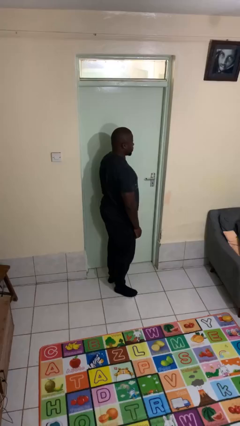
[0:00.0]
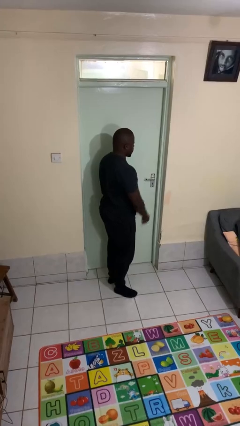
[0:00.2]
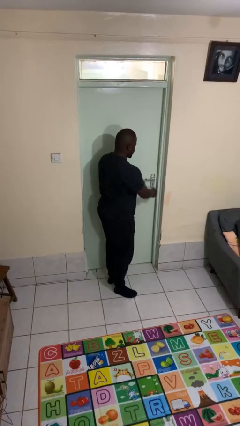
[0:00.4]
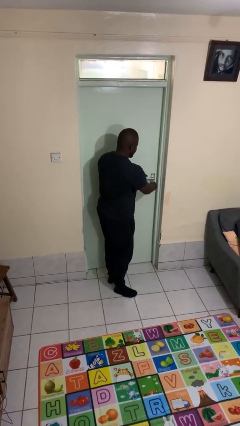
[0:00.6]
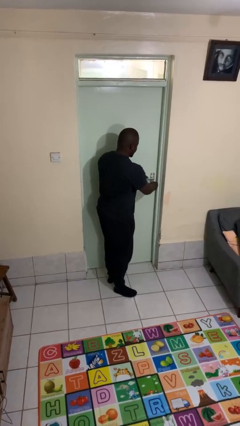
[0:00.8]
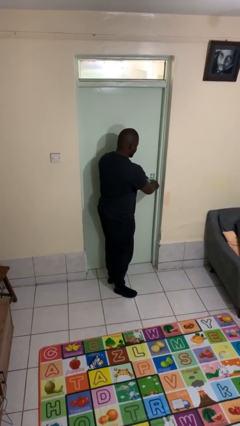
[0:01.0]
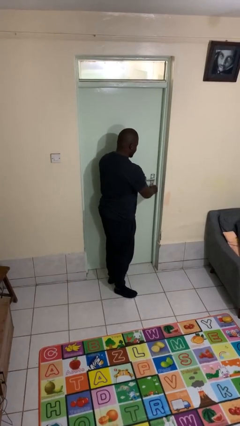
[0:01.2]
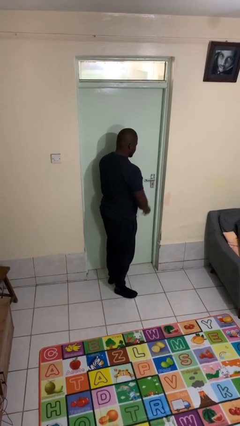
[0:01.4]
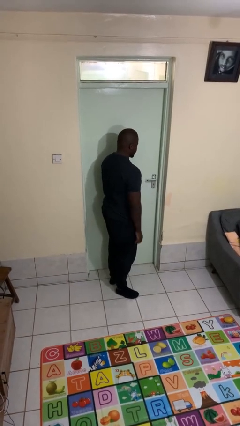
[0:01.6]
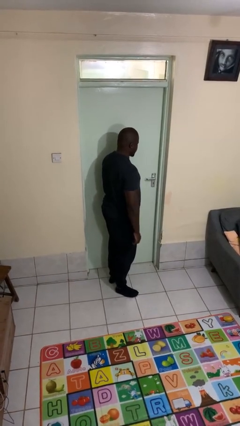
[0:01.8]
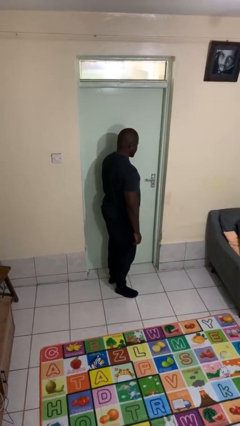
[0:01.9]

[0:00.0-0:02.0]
person unlocks door with keys

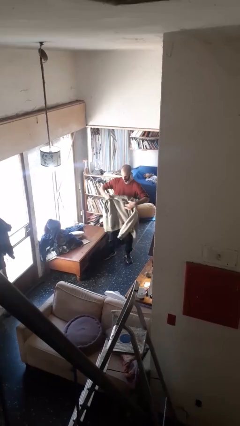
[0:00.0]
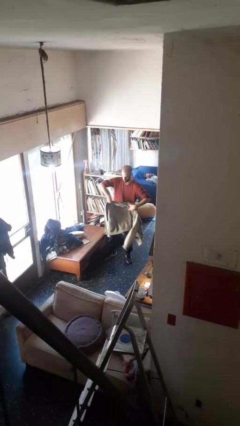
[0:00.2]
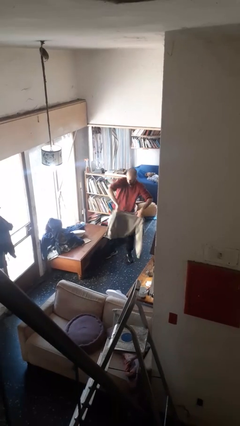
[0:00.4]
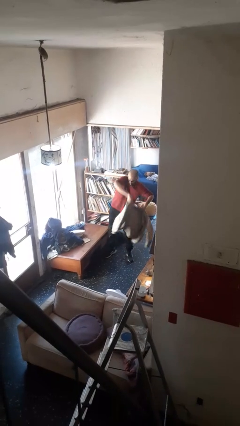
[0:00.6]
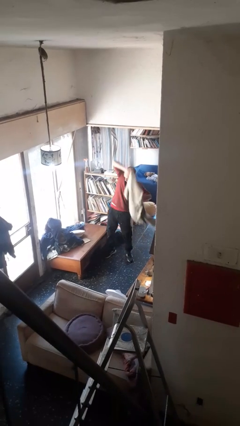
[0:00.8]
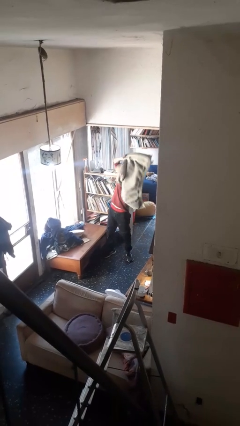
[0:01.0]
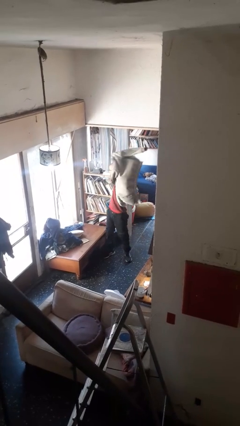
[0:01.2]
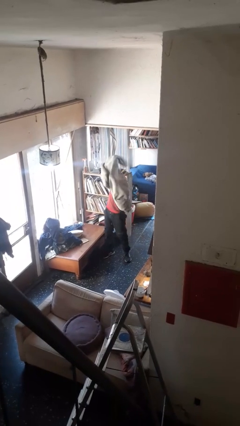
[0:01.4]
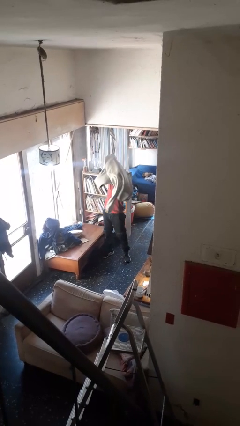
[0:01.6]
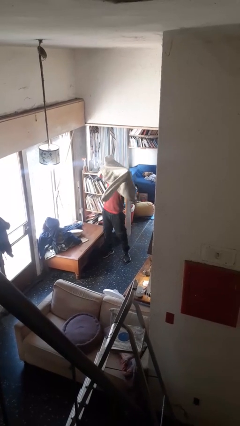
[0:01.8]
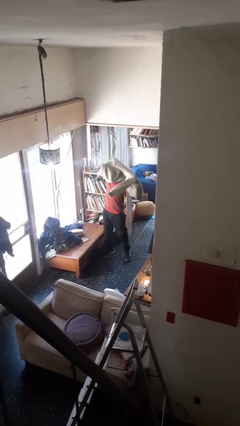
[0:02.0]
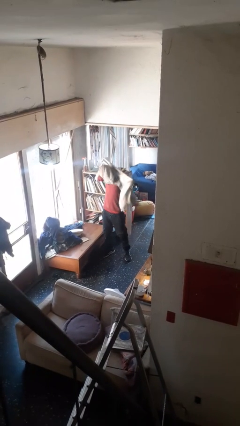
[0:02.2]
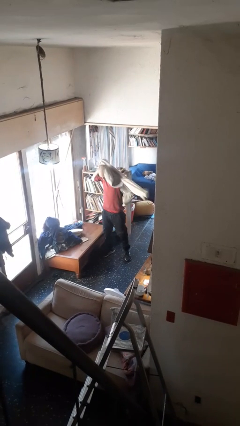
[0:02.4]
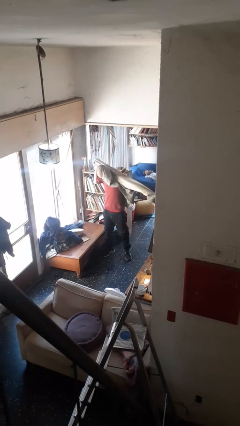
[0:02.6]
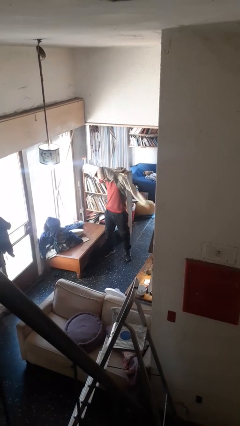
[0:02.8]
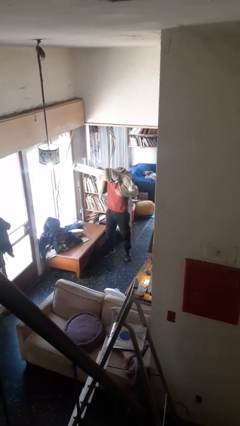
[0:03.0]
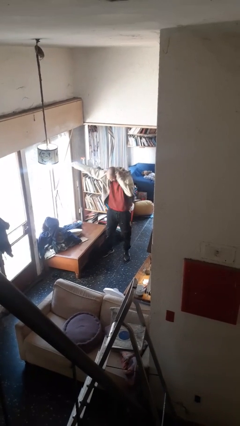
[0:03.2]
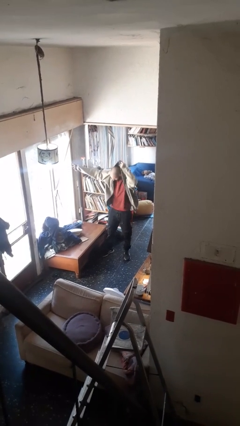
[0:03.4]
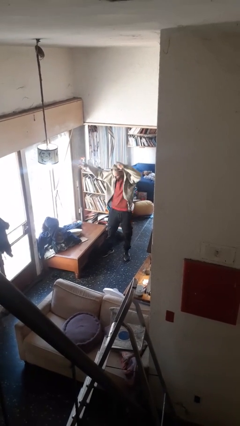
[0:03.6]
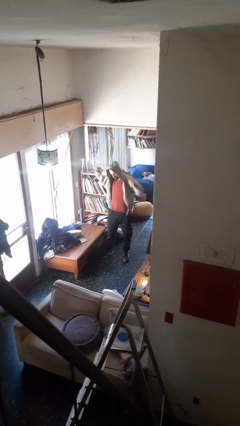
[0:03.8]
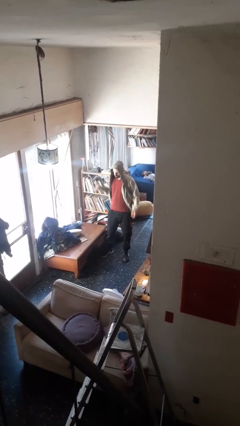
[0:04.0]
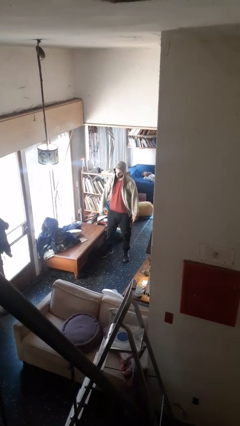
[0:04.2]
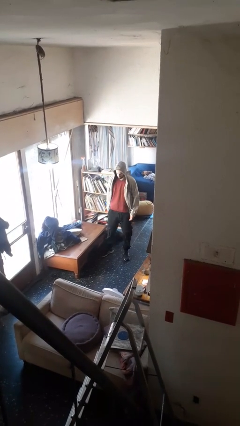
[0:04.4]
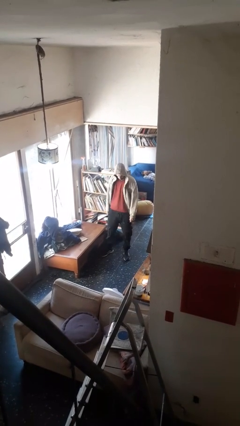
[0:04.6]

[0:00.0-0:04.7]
person puts on hoodie

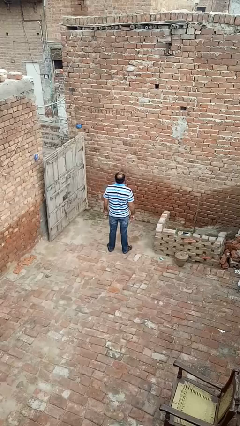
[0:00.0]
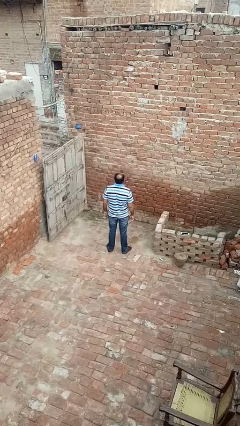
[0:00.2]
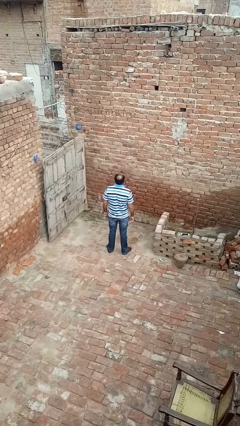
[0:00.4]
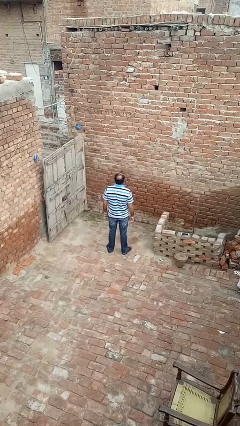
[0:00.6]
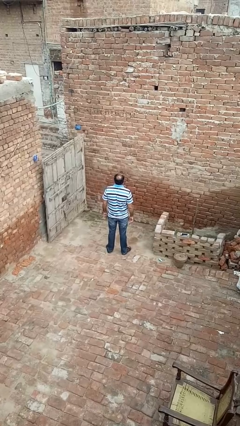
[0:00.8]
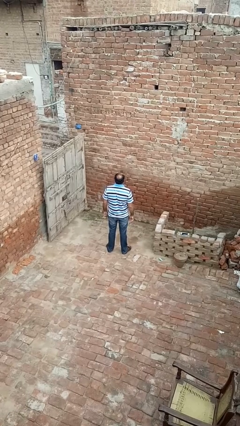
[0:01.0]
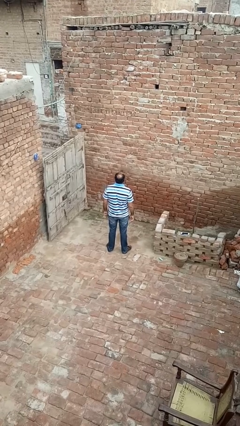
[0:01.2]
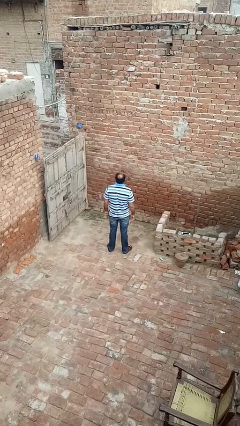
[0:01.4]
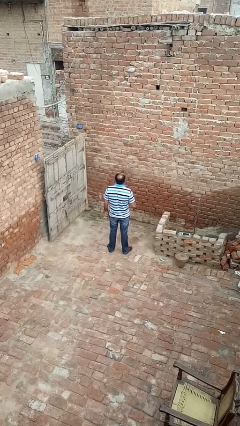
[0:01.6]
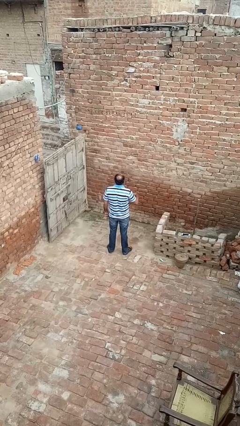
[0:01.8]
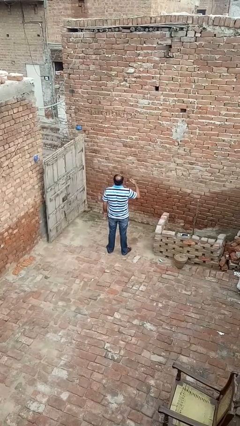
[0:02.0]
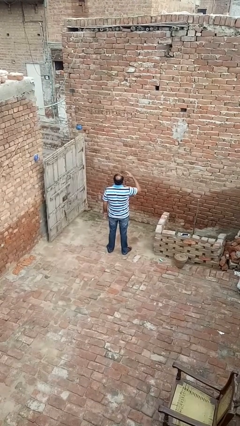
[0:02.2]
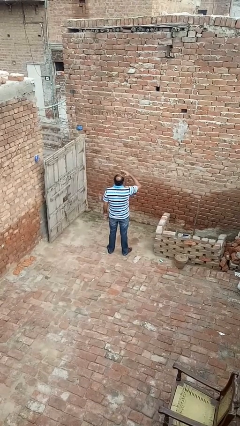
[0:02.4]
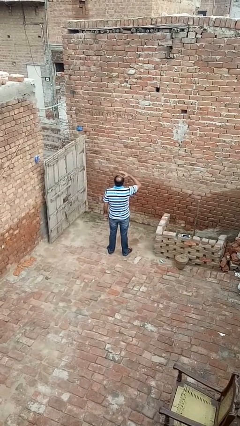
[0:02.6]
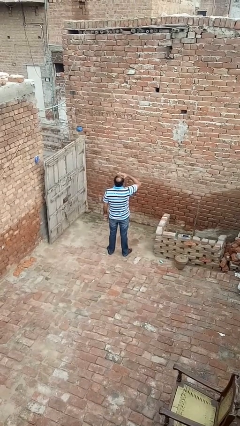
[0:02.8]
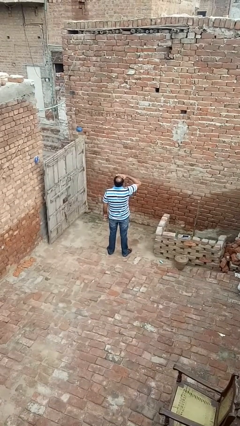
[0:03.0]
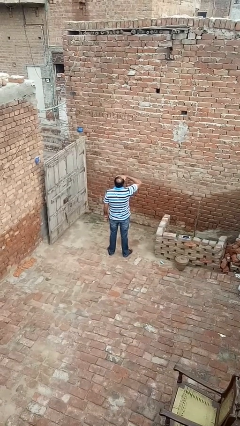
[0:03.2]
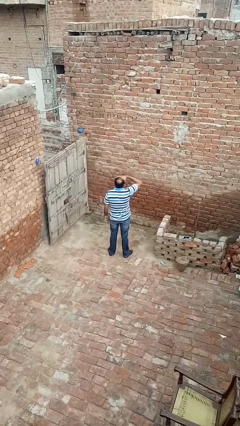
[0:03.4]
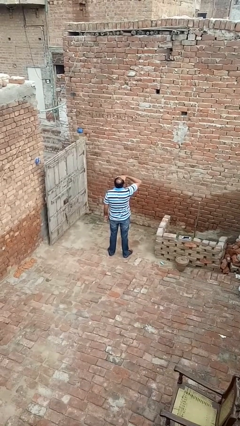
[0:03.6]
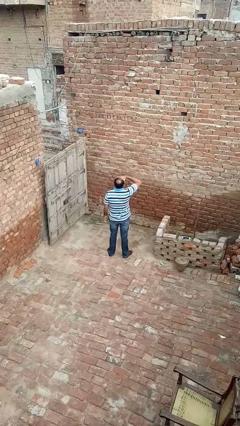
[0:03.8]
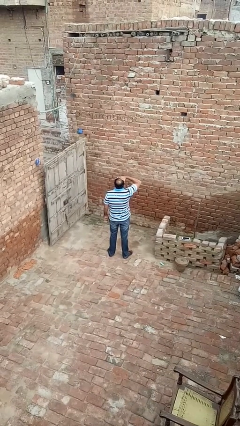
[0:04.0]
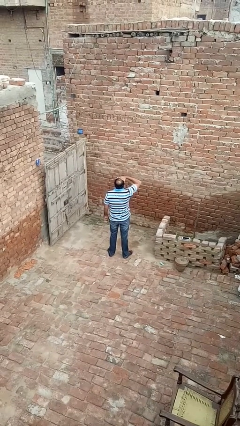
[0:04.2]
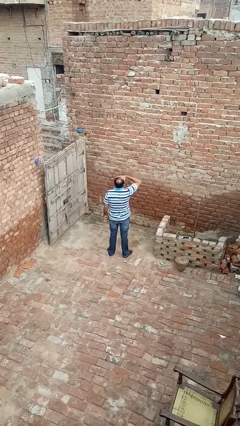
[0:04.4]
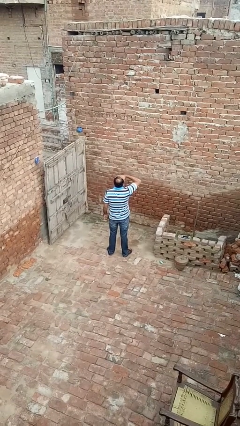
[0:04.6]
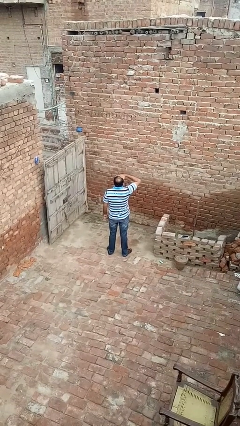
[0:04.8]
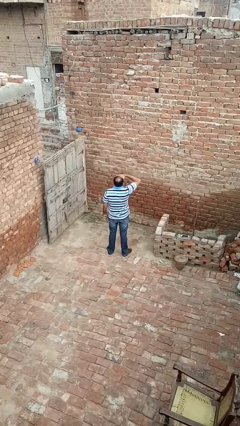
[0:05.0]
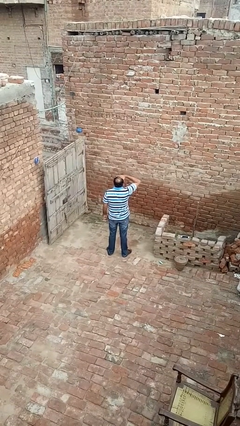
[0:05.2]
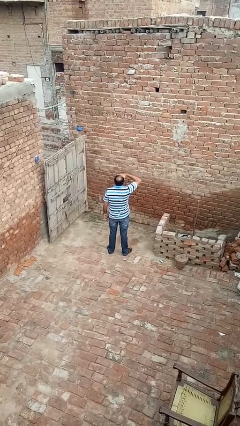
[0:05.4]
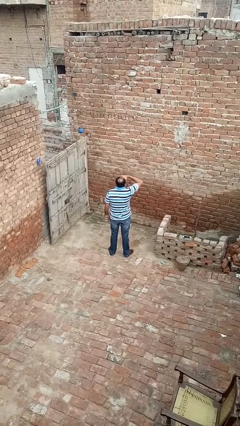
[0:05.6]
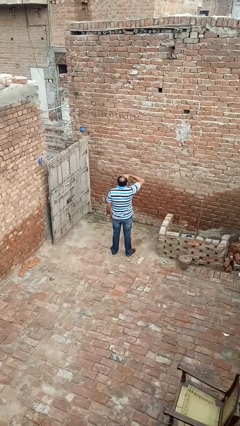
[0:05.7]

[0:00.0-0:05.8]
person shades eyes

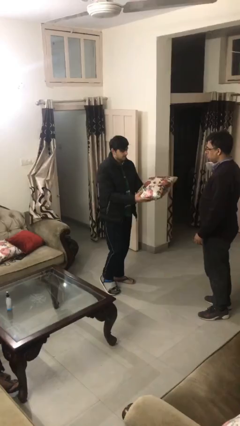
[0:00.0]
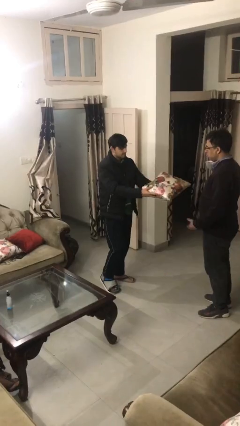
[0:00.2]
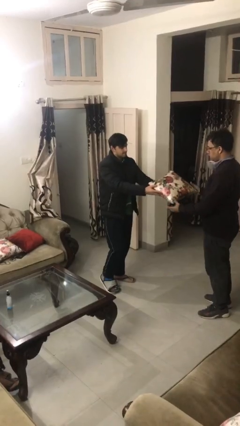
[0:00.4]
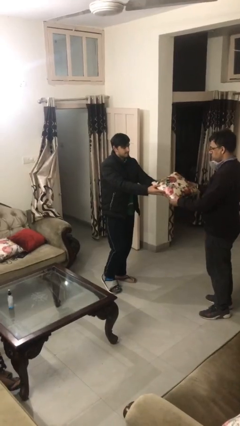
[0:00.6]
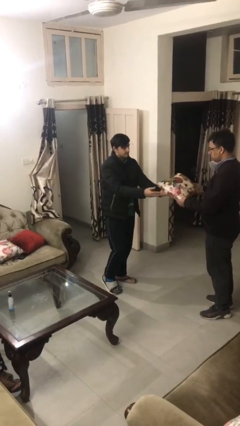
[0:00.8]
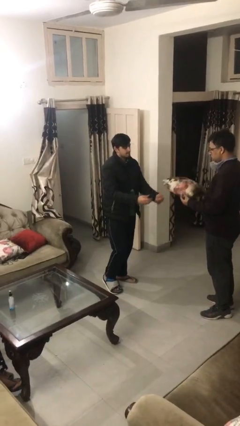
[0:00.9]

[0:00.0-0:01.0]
person transfers object to person

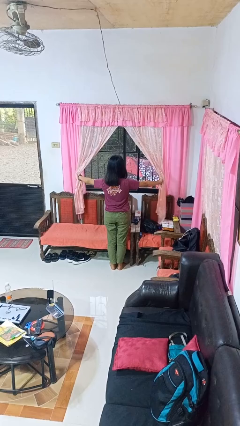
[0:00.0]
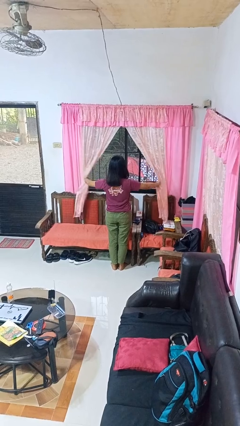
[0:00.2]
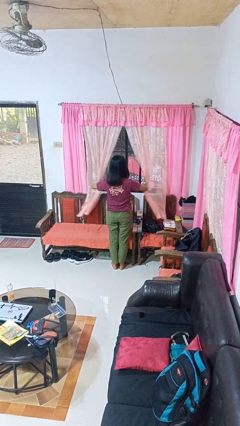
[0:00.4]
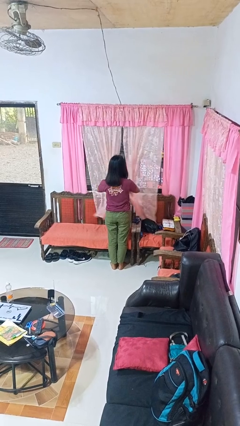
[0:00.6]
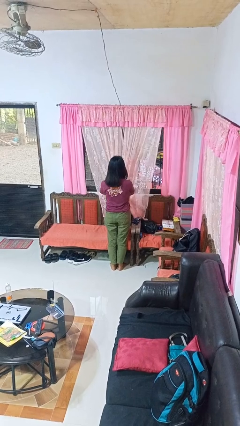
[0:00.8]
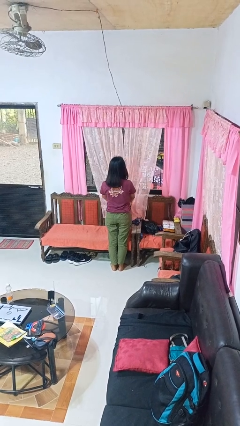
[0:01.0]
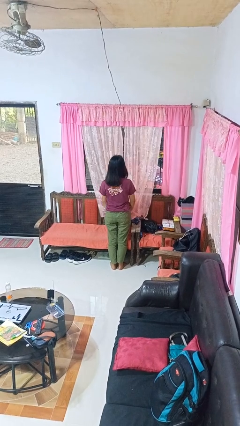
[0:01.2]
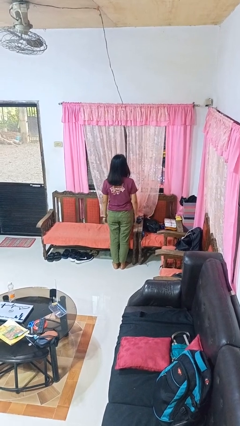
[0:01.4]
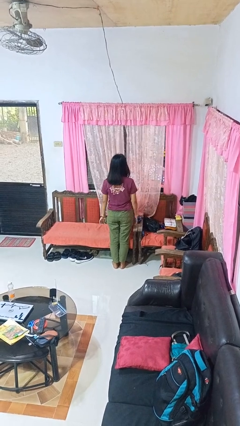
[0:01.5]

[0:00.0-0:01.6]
person closes curtains

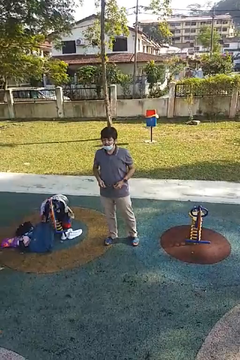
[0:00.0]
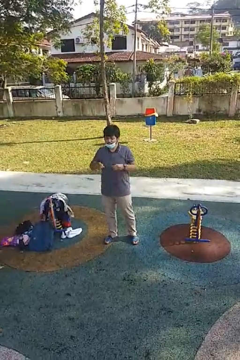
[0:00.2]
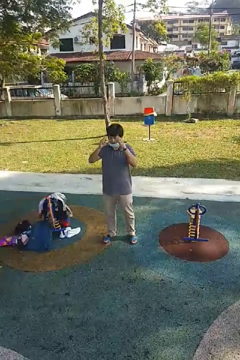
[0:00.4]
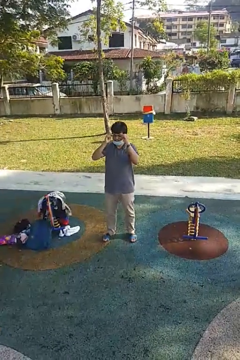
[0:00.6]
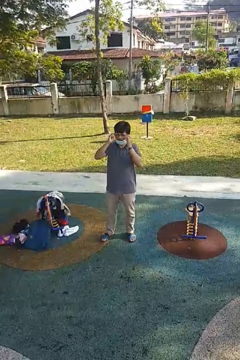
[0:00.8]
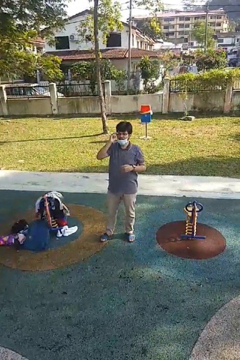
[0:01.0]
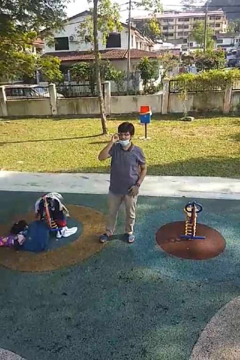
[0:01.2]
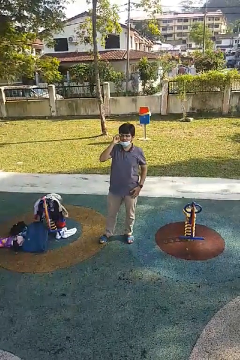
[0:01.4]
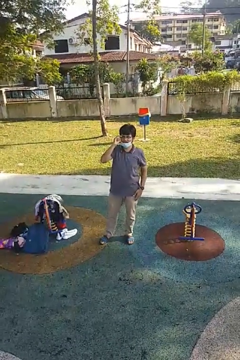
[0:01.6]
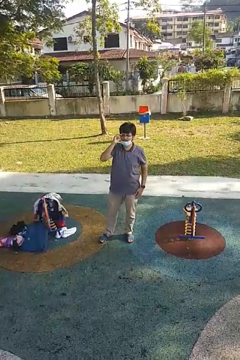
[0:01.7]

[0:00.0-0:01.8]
person puts on glasses

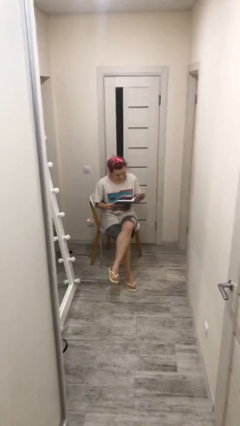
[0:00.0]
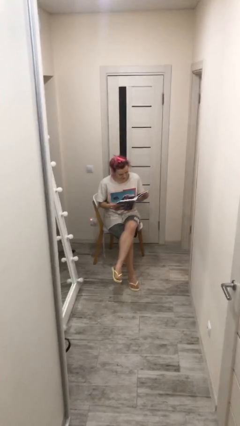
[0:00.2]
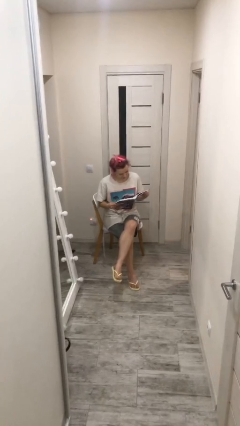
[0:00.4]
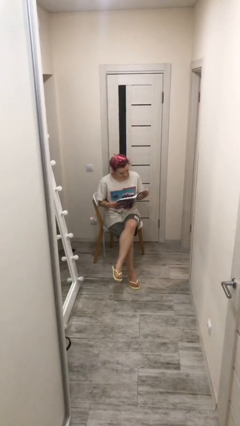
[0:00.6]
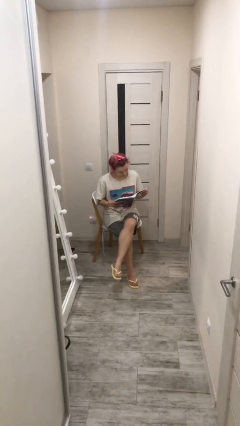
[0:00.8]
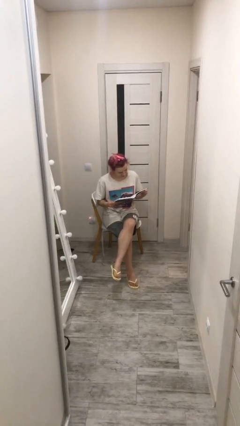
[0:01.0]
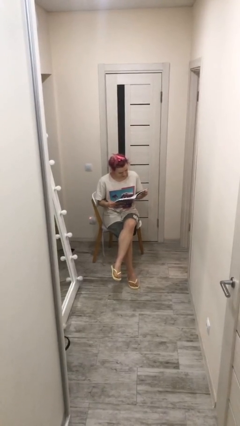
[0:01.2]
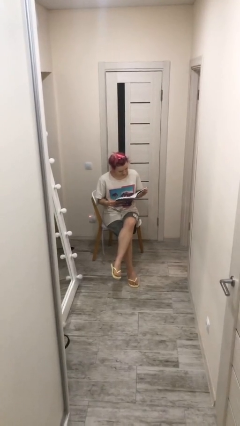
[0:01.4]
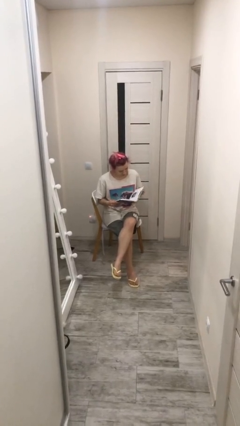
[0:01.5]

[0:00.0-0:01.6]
person reads document
